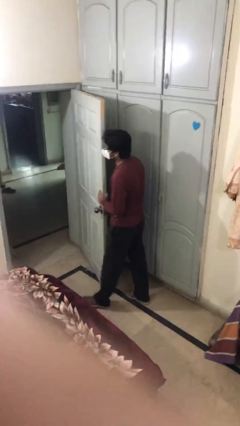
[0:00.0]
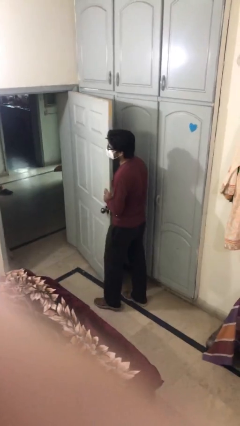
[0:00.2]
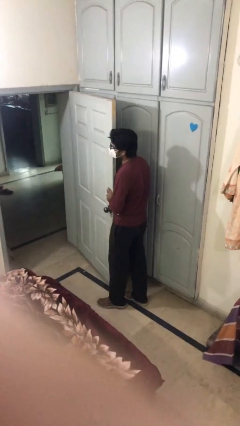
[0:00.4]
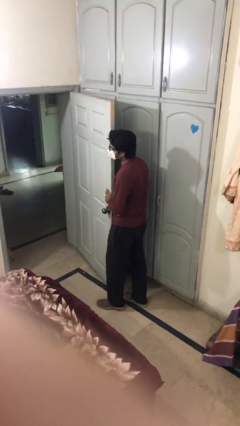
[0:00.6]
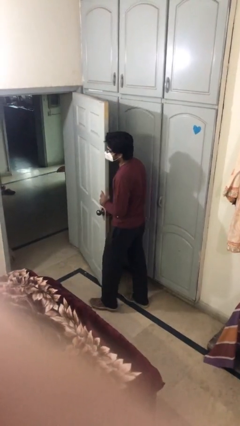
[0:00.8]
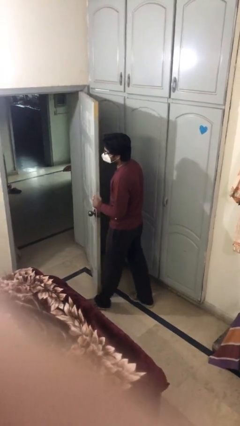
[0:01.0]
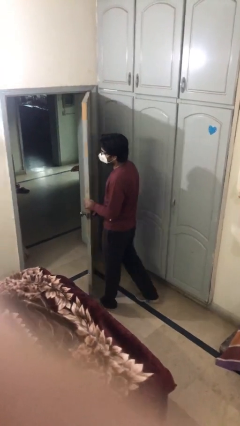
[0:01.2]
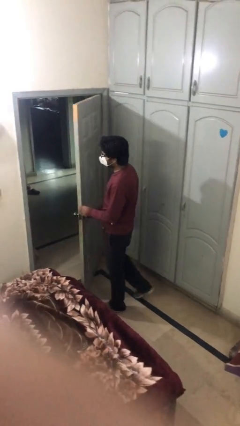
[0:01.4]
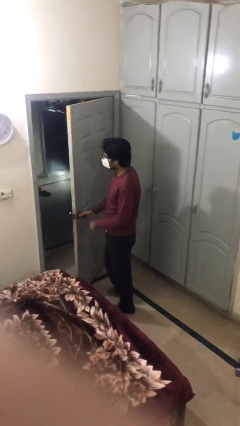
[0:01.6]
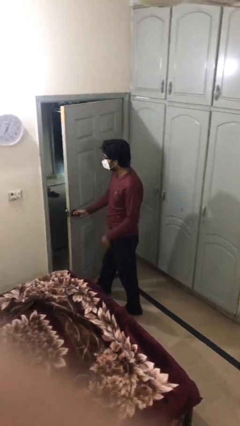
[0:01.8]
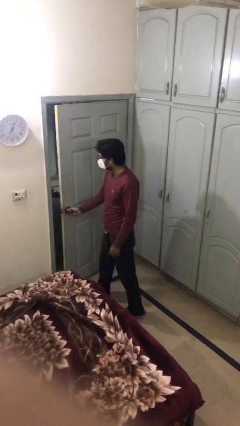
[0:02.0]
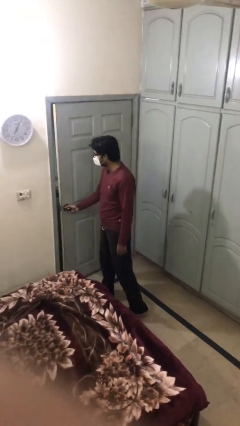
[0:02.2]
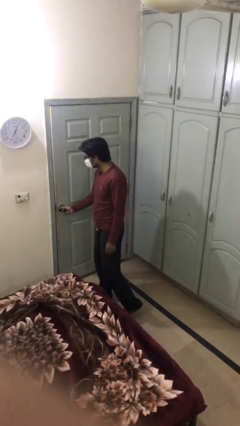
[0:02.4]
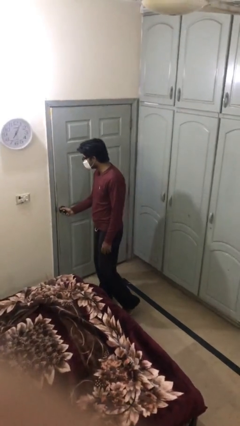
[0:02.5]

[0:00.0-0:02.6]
person closes facility door

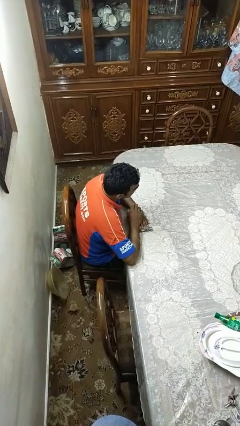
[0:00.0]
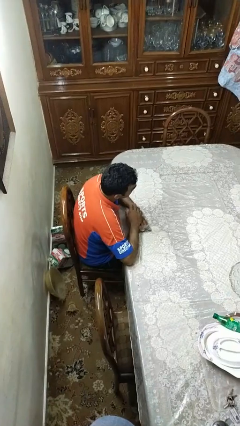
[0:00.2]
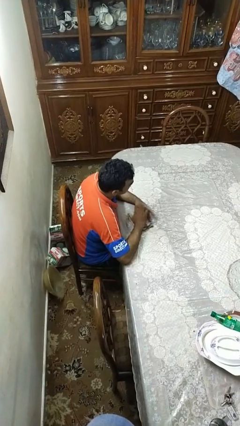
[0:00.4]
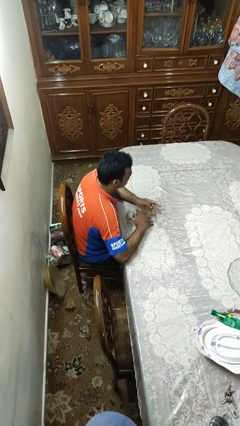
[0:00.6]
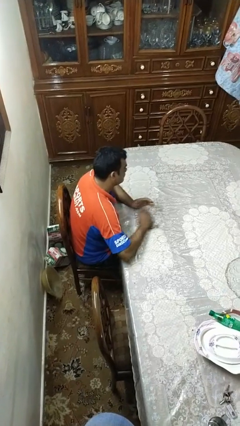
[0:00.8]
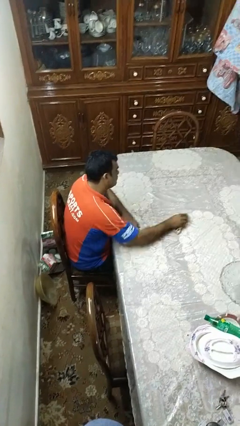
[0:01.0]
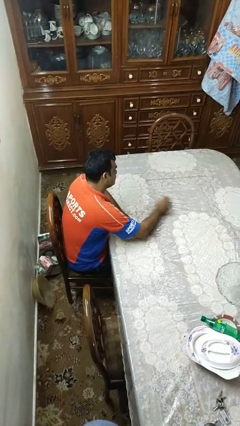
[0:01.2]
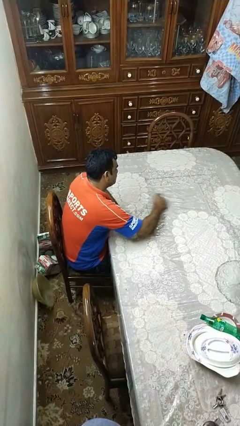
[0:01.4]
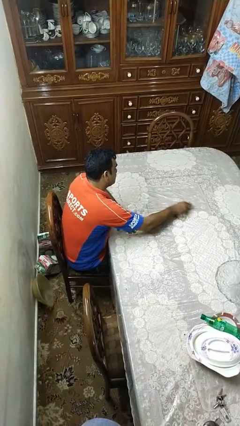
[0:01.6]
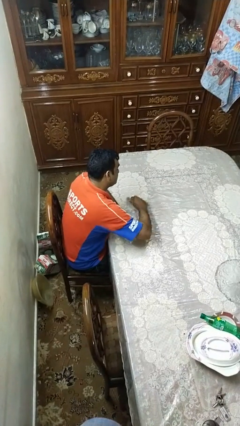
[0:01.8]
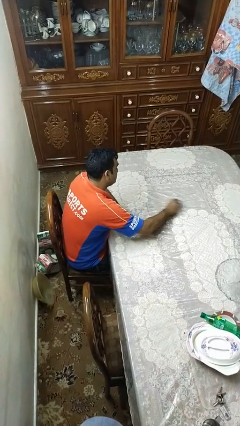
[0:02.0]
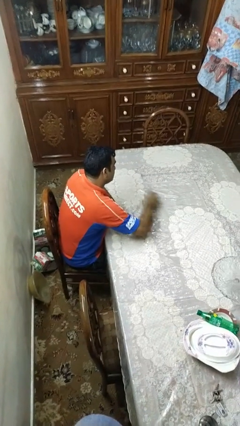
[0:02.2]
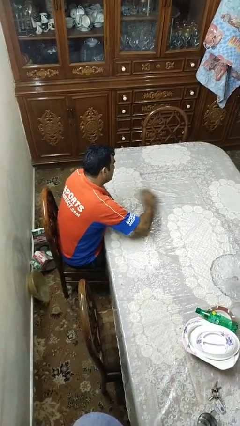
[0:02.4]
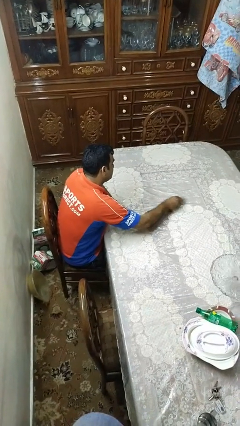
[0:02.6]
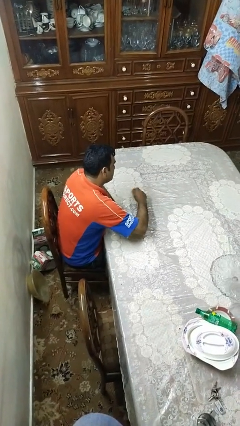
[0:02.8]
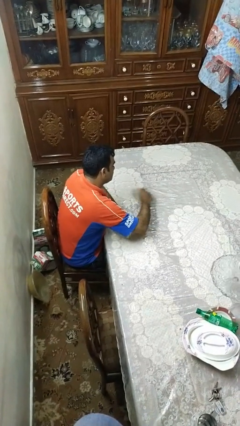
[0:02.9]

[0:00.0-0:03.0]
person cleans table with rag
